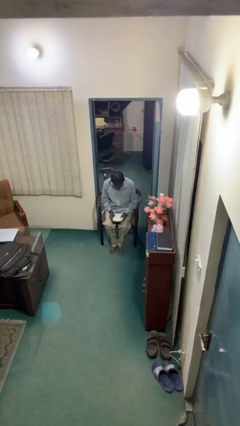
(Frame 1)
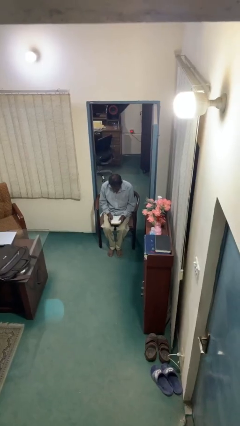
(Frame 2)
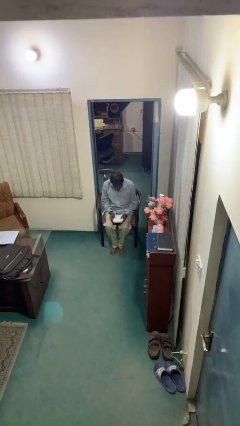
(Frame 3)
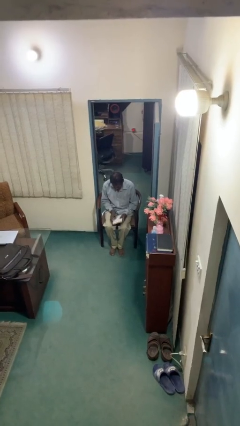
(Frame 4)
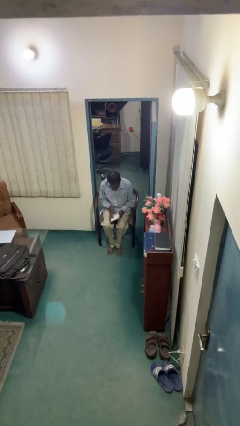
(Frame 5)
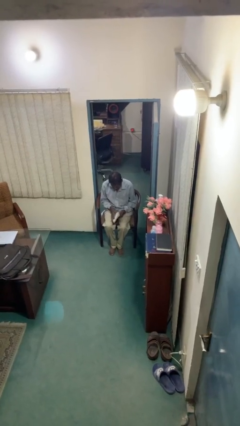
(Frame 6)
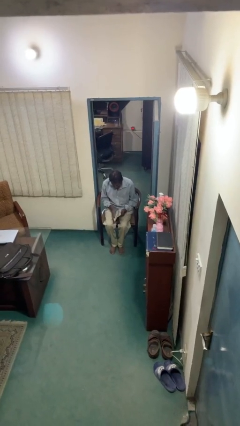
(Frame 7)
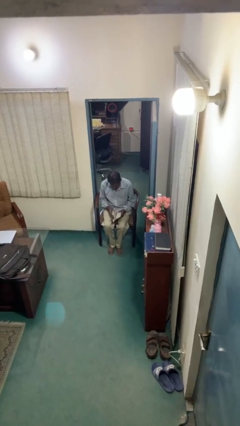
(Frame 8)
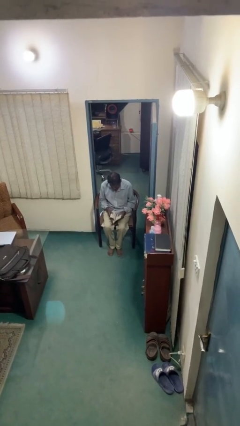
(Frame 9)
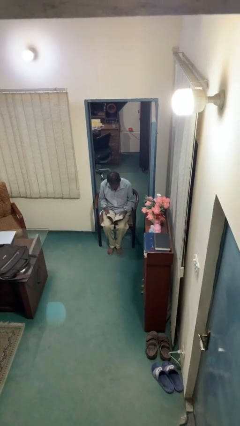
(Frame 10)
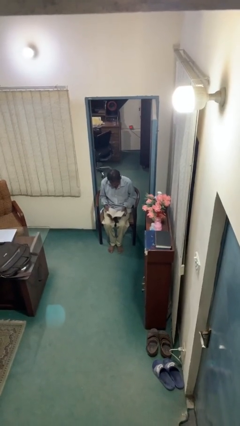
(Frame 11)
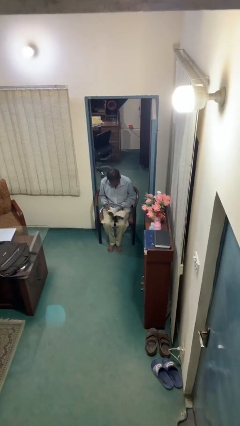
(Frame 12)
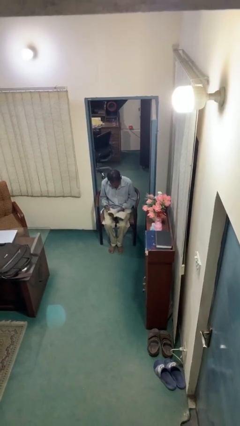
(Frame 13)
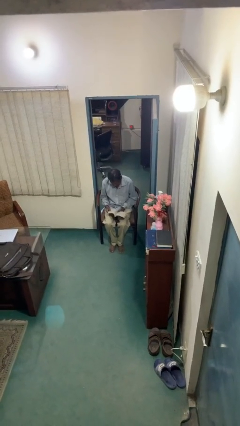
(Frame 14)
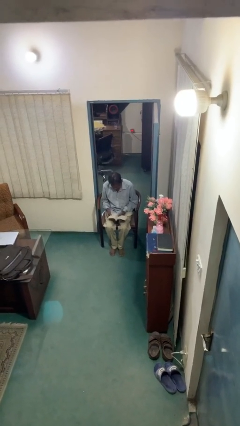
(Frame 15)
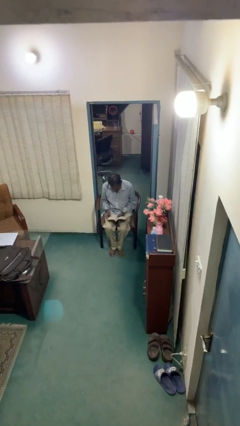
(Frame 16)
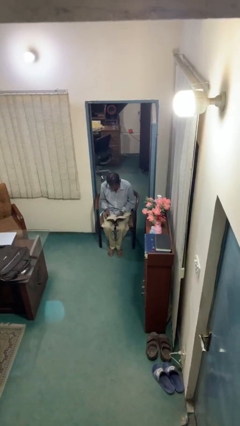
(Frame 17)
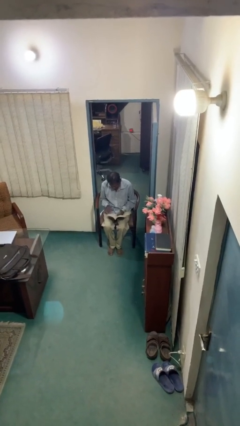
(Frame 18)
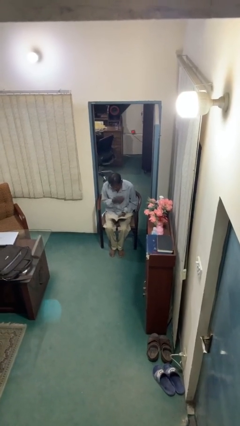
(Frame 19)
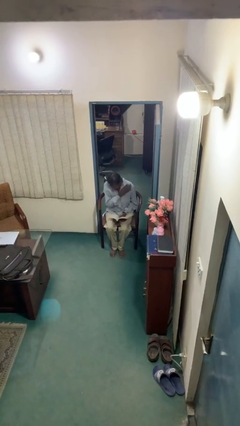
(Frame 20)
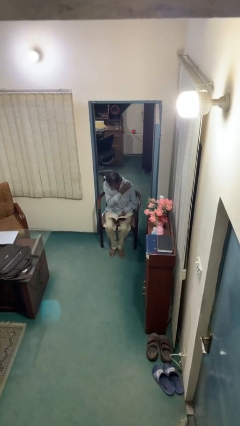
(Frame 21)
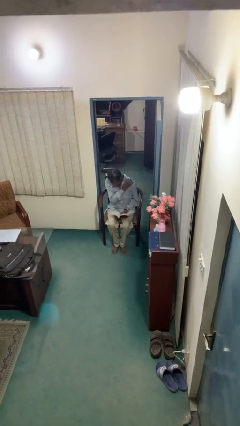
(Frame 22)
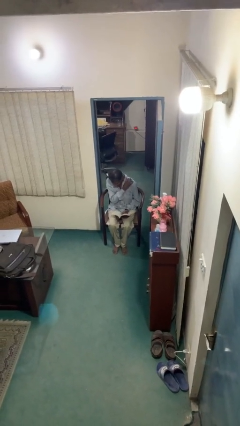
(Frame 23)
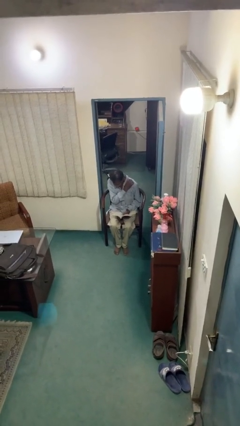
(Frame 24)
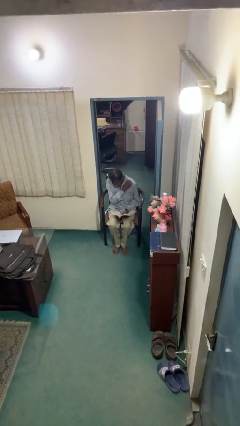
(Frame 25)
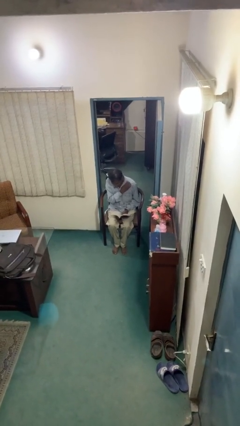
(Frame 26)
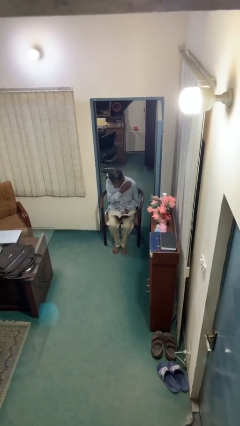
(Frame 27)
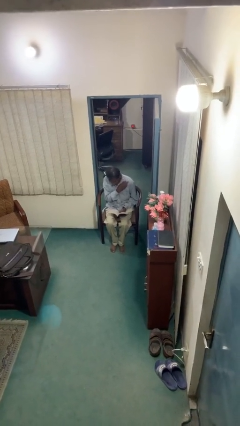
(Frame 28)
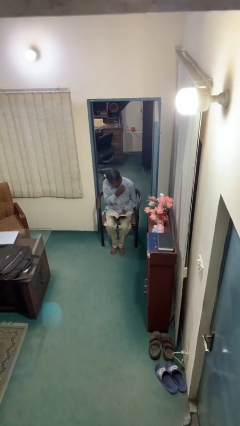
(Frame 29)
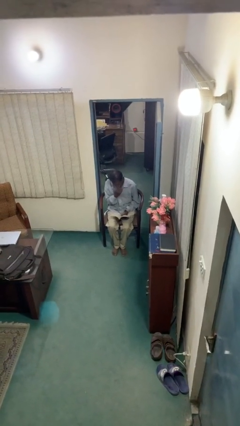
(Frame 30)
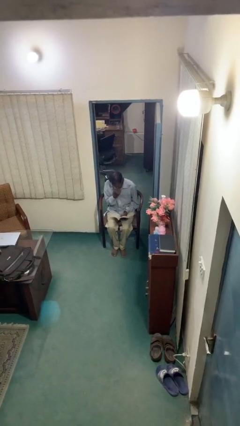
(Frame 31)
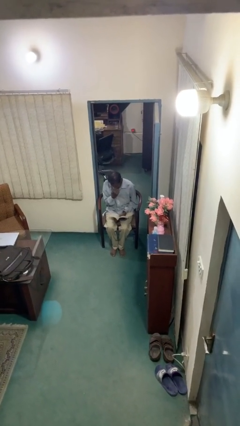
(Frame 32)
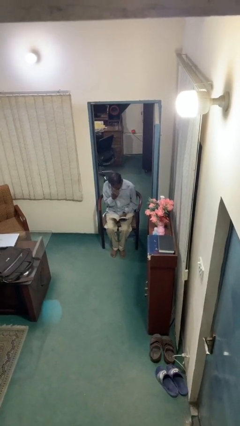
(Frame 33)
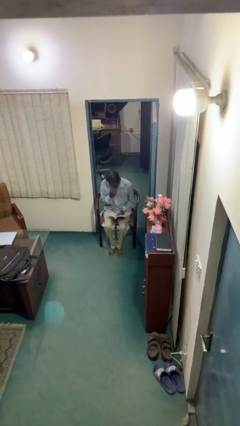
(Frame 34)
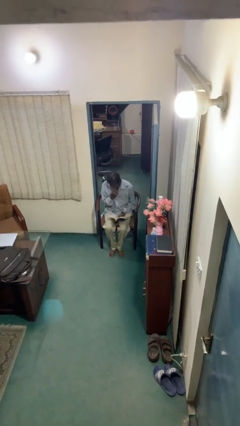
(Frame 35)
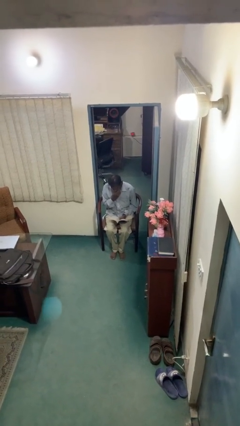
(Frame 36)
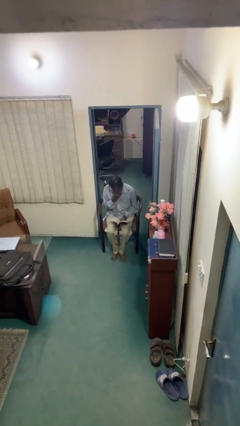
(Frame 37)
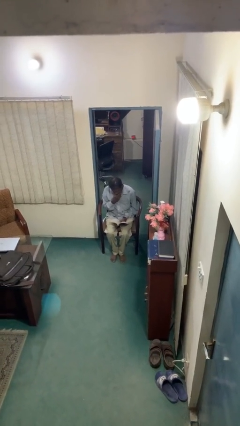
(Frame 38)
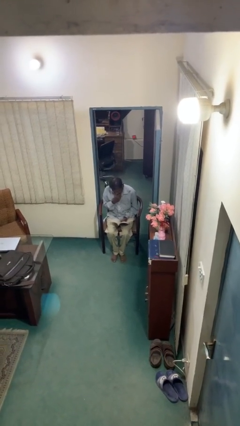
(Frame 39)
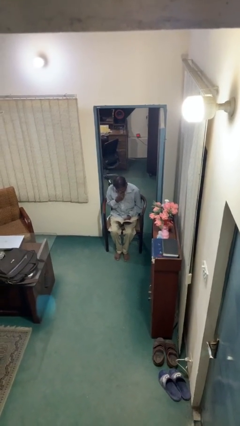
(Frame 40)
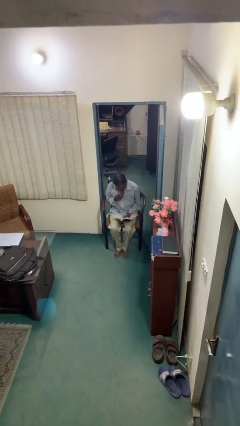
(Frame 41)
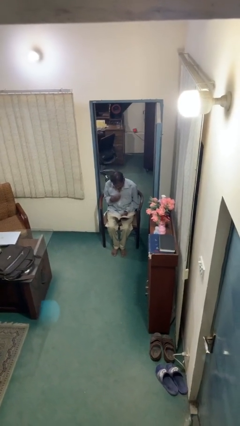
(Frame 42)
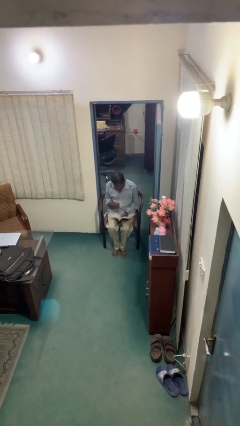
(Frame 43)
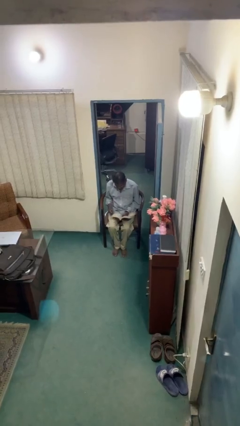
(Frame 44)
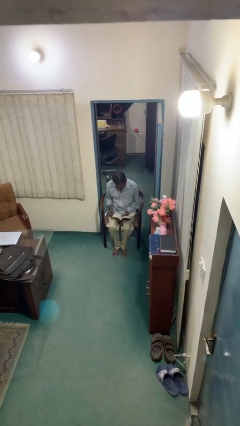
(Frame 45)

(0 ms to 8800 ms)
person reads document

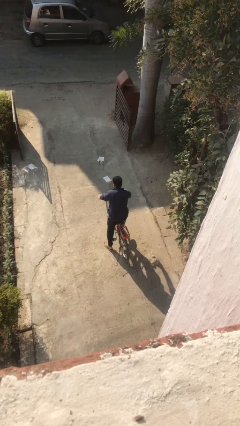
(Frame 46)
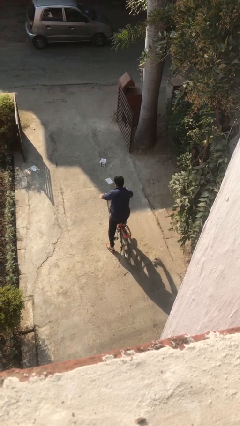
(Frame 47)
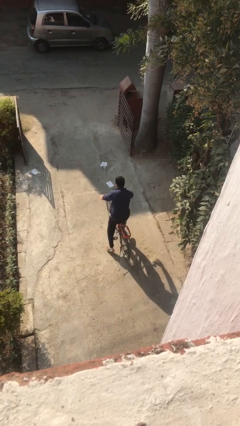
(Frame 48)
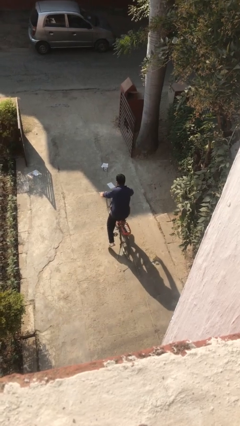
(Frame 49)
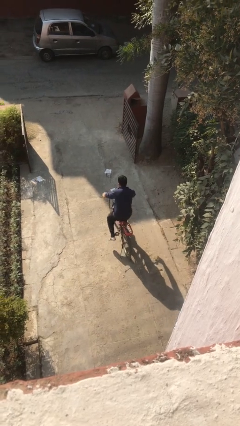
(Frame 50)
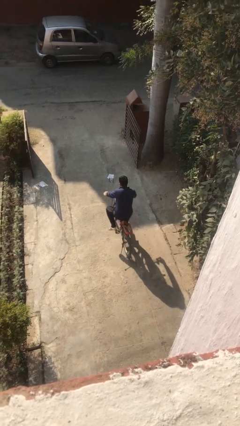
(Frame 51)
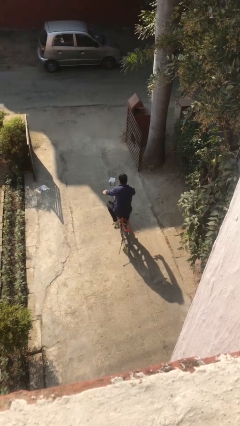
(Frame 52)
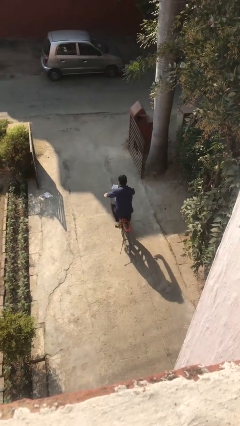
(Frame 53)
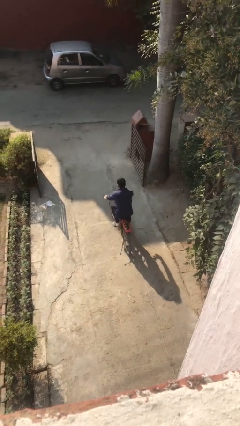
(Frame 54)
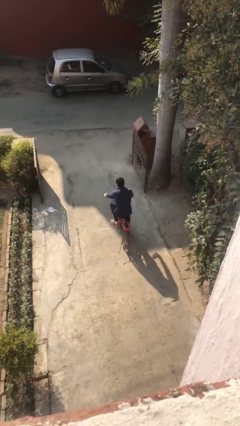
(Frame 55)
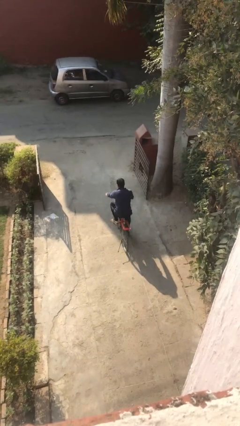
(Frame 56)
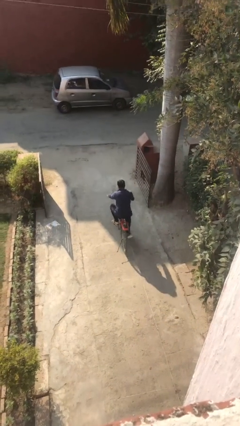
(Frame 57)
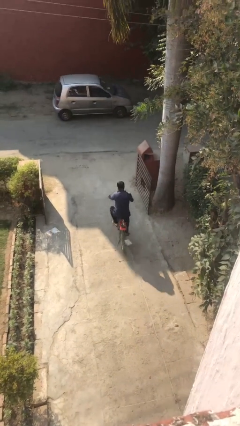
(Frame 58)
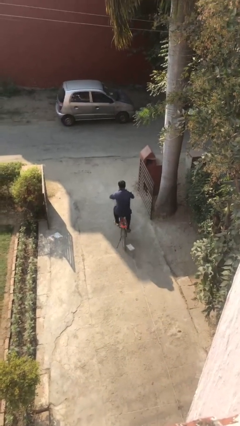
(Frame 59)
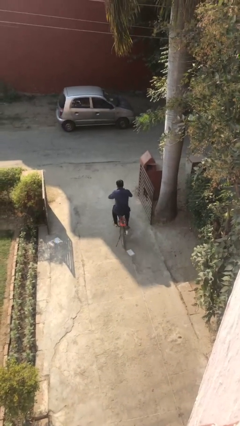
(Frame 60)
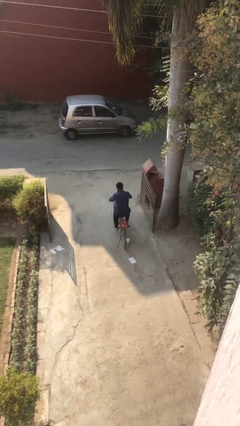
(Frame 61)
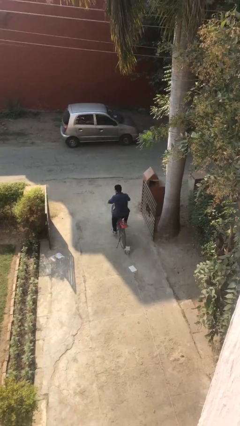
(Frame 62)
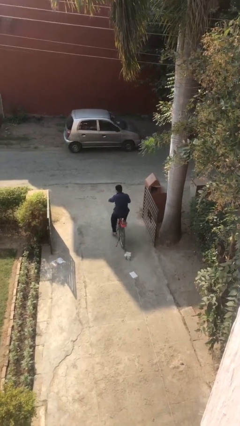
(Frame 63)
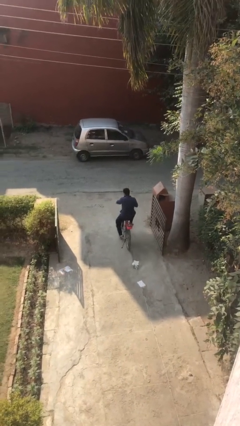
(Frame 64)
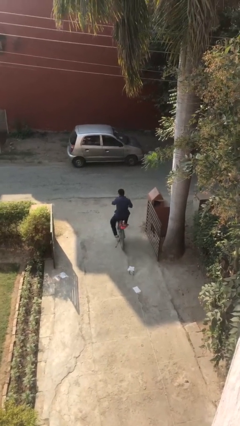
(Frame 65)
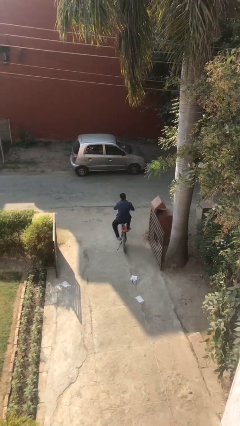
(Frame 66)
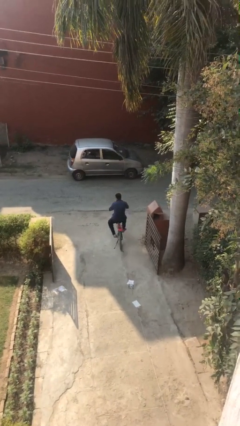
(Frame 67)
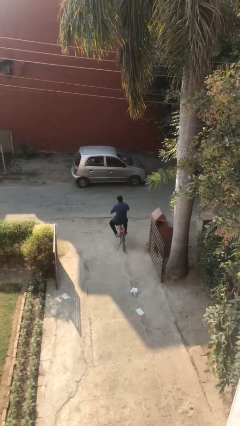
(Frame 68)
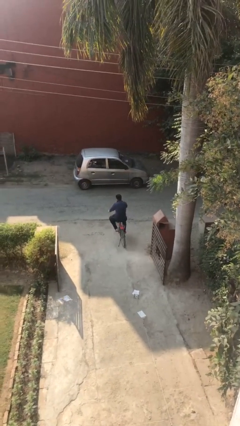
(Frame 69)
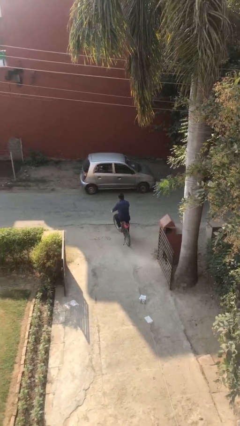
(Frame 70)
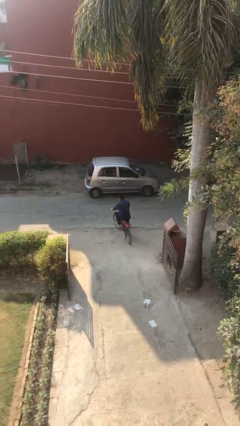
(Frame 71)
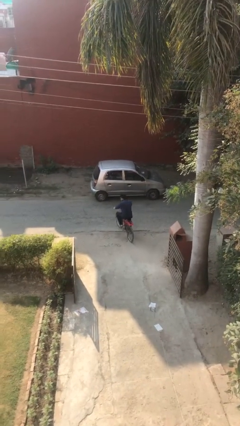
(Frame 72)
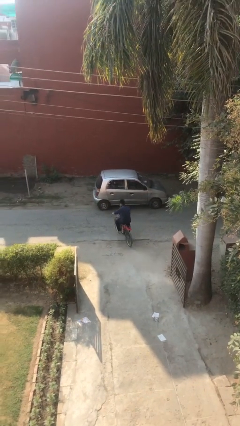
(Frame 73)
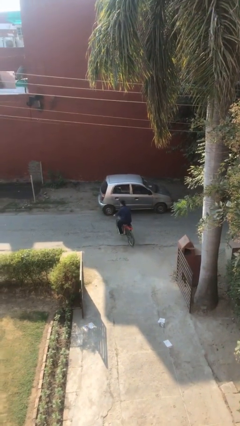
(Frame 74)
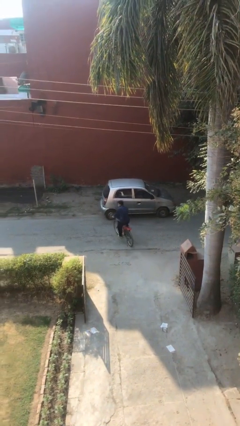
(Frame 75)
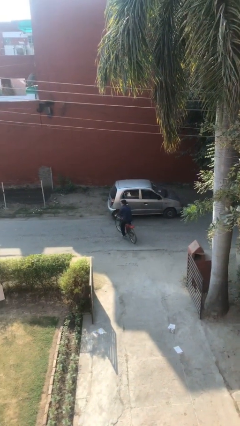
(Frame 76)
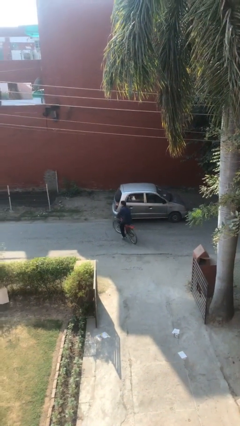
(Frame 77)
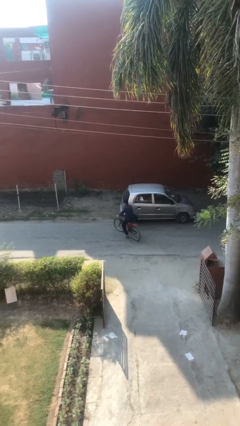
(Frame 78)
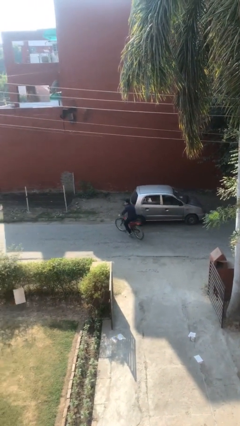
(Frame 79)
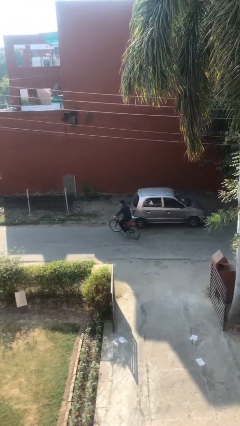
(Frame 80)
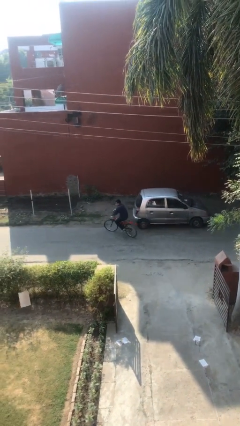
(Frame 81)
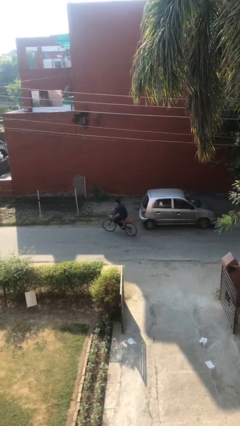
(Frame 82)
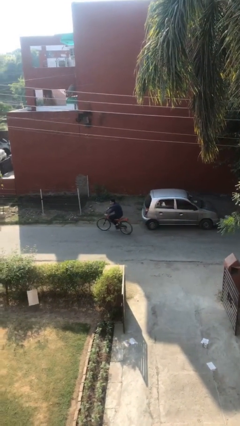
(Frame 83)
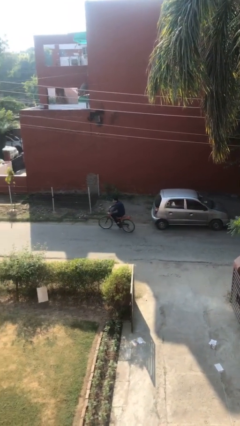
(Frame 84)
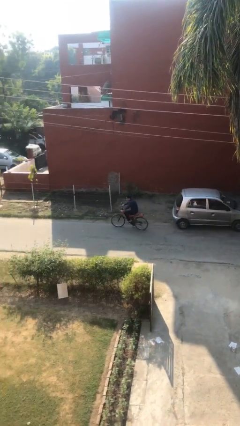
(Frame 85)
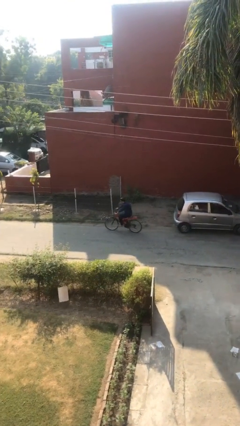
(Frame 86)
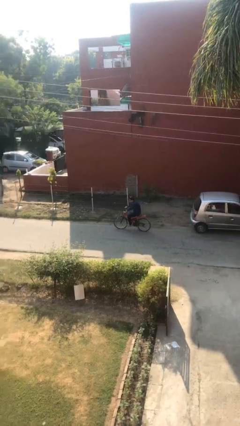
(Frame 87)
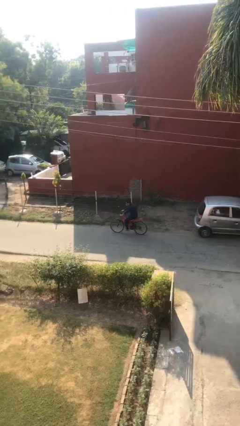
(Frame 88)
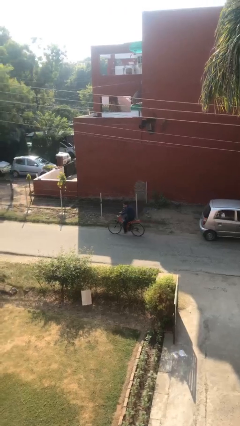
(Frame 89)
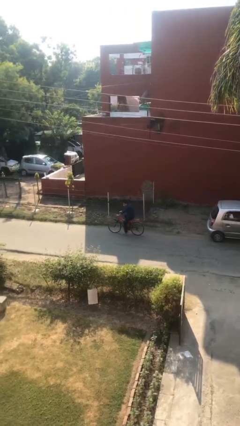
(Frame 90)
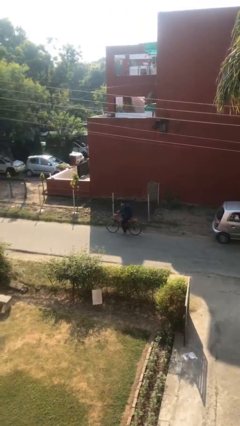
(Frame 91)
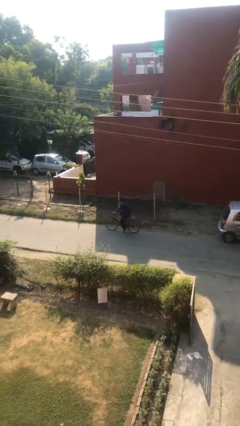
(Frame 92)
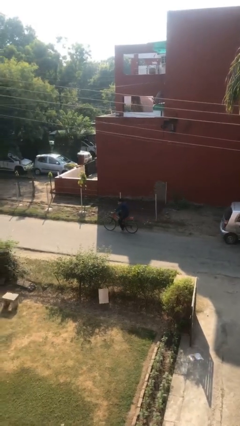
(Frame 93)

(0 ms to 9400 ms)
person rides bicycle
